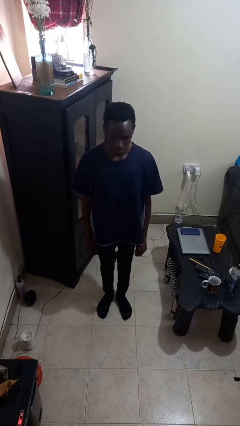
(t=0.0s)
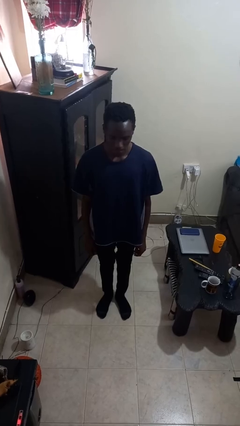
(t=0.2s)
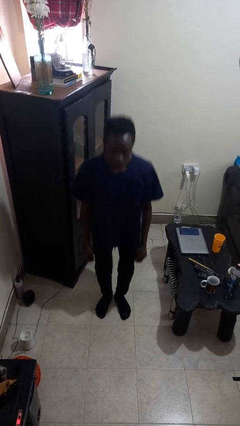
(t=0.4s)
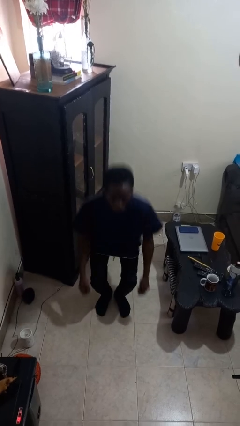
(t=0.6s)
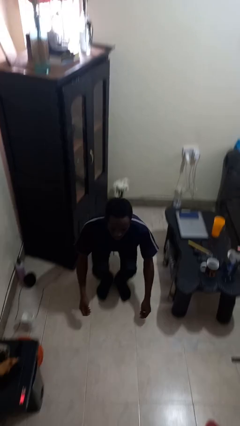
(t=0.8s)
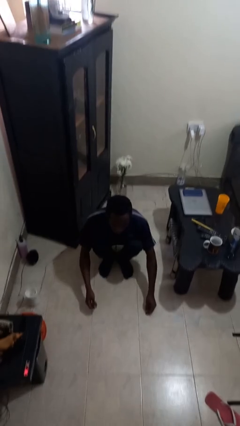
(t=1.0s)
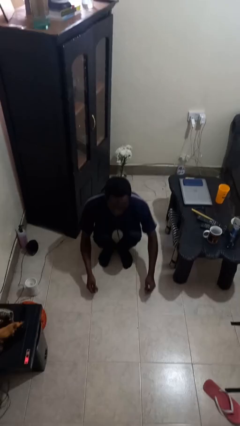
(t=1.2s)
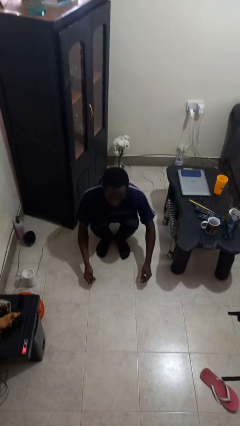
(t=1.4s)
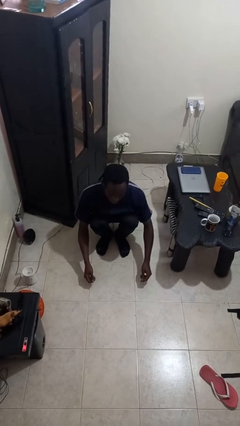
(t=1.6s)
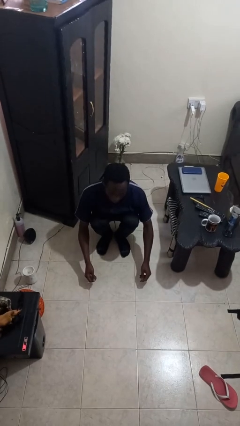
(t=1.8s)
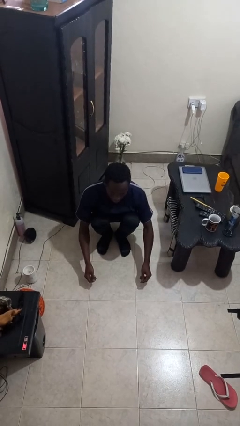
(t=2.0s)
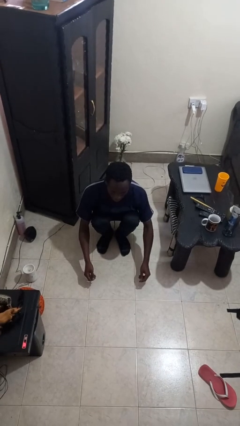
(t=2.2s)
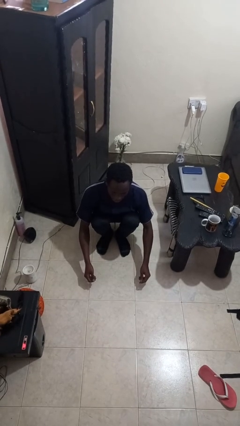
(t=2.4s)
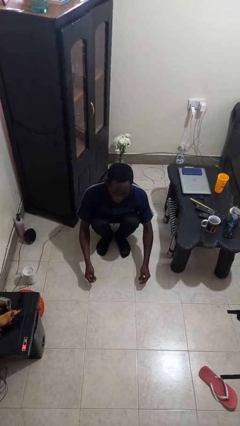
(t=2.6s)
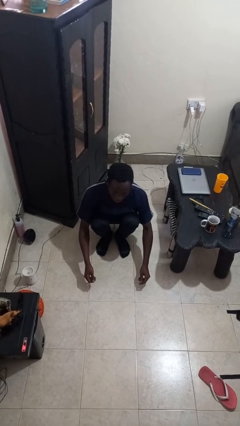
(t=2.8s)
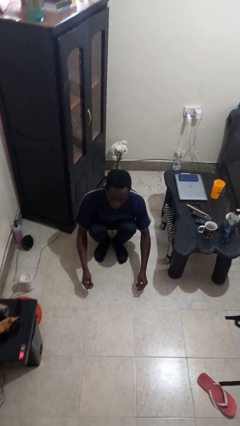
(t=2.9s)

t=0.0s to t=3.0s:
person squats

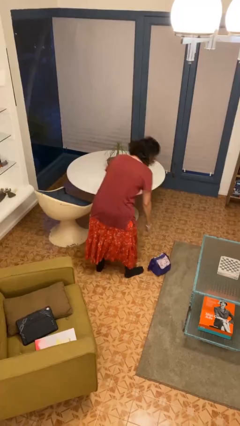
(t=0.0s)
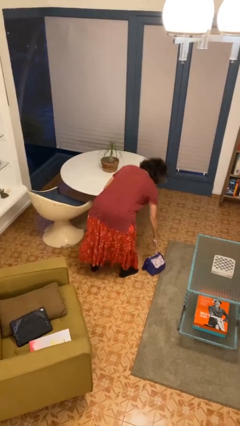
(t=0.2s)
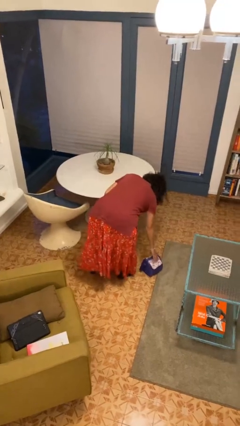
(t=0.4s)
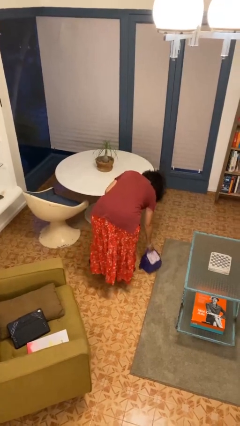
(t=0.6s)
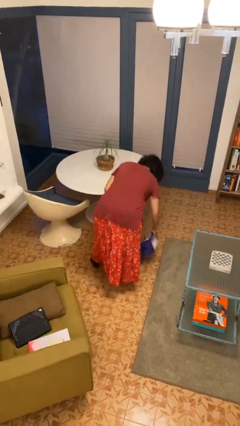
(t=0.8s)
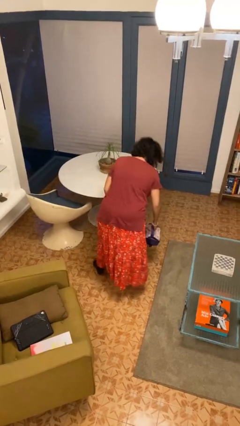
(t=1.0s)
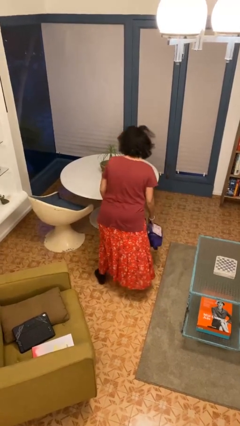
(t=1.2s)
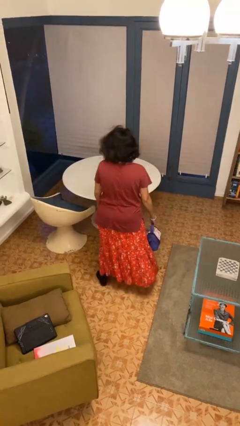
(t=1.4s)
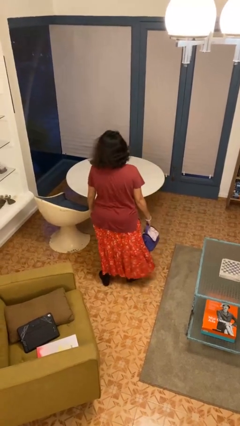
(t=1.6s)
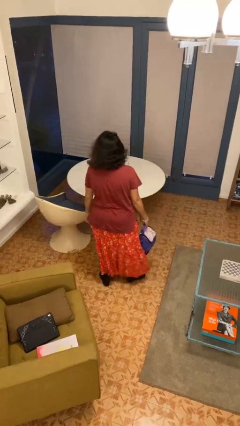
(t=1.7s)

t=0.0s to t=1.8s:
person picks up object from floor

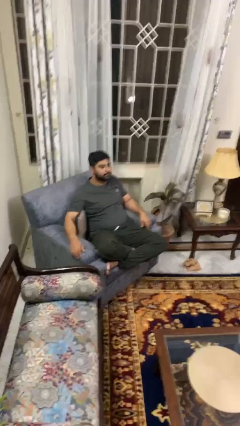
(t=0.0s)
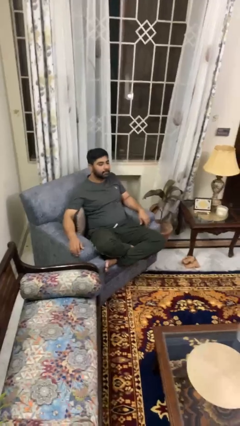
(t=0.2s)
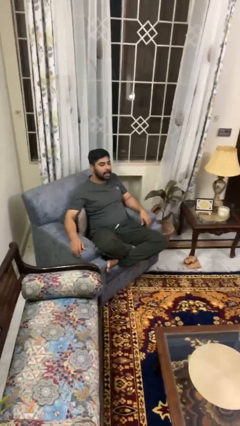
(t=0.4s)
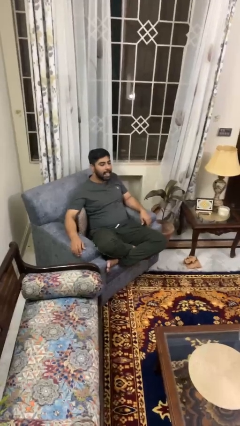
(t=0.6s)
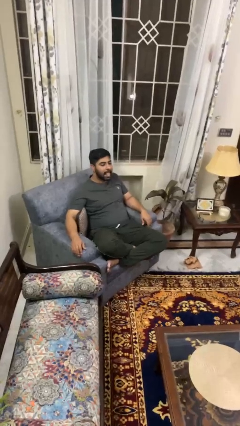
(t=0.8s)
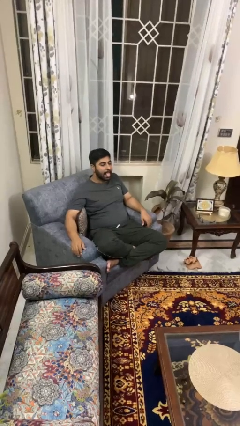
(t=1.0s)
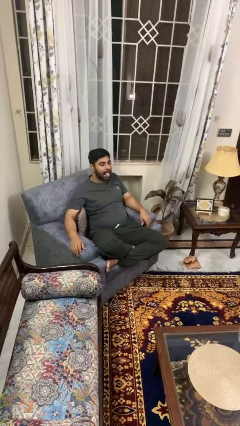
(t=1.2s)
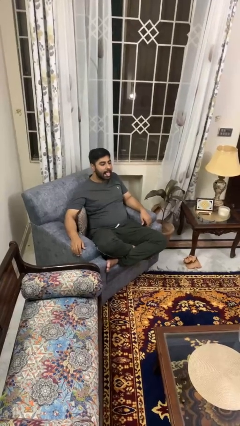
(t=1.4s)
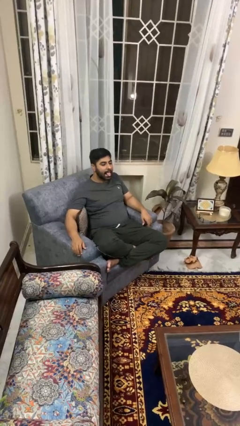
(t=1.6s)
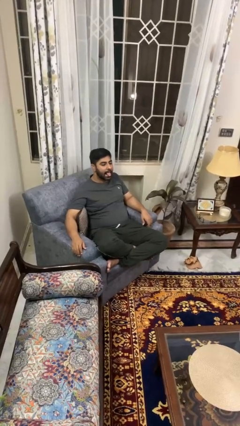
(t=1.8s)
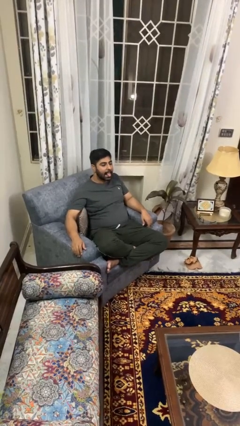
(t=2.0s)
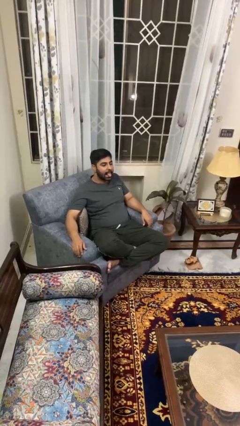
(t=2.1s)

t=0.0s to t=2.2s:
person sticks out tongue

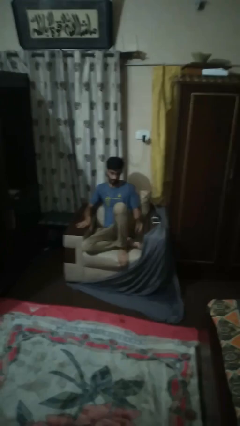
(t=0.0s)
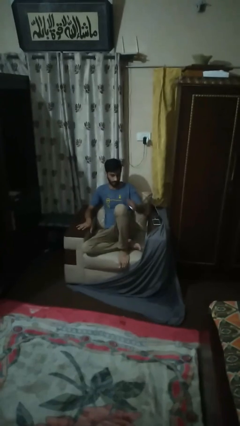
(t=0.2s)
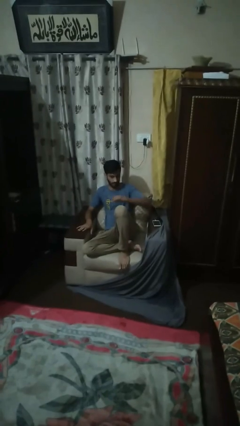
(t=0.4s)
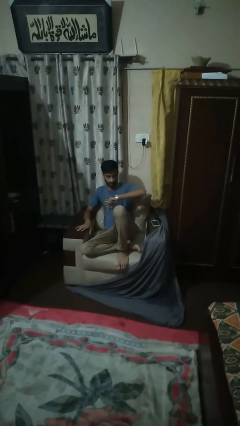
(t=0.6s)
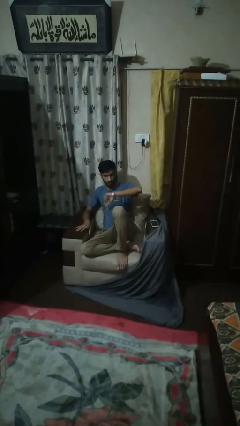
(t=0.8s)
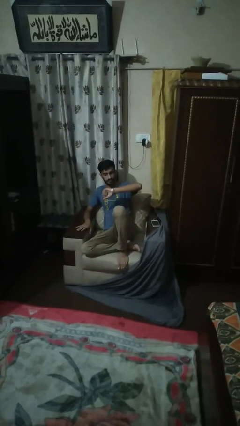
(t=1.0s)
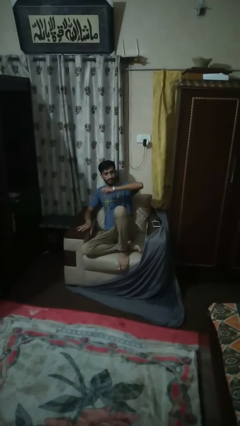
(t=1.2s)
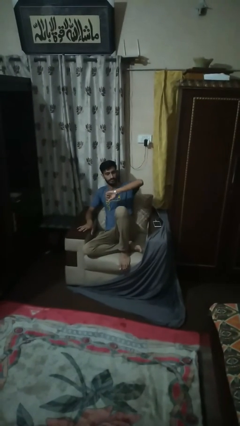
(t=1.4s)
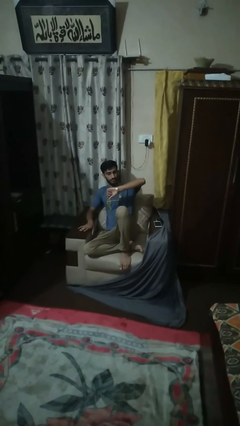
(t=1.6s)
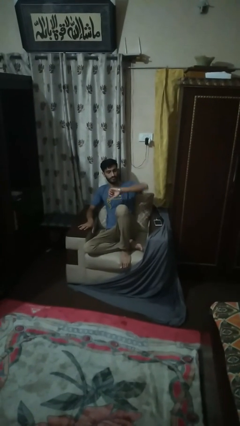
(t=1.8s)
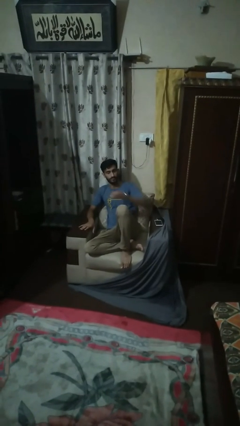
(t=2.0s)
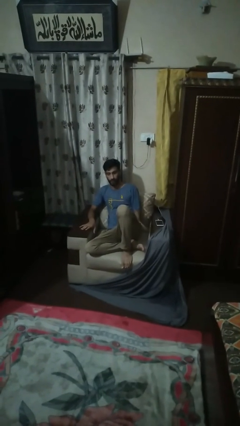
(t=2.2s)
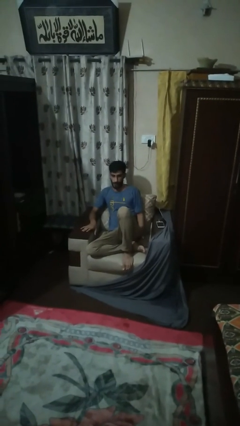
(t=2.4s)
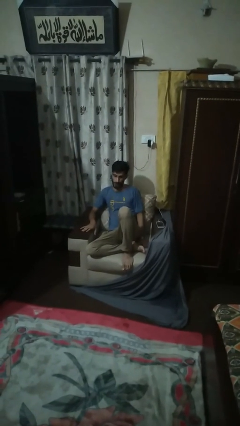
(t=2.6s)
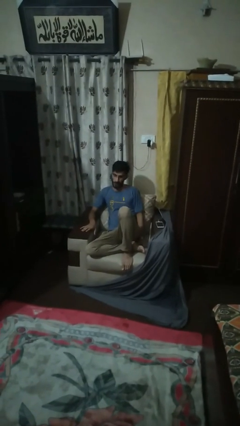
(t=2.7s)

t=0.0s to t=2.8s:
person looks at wristwatch

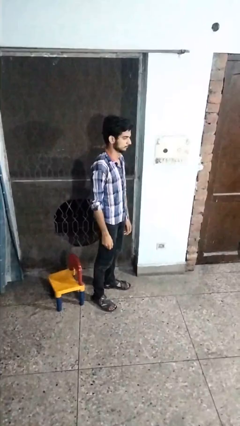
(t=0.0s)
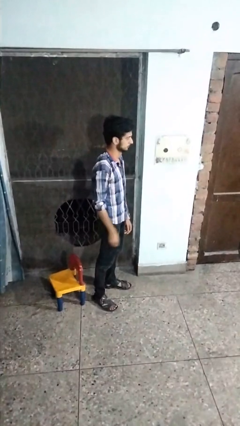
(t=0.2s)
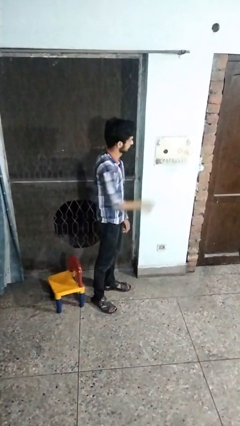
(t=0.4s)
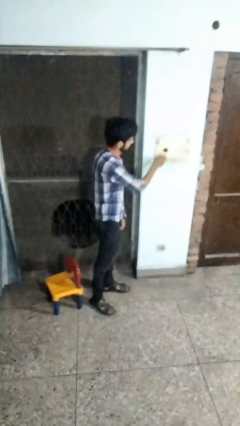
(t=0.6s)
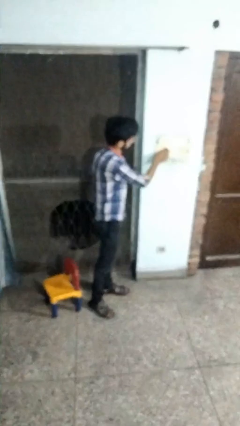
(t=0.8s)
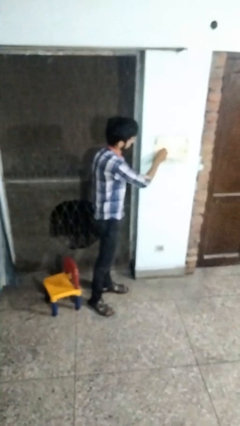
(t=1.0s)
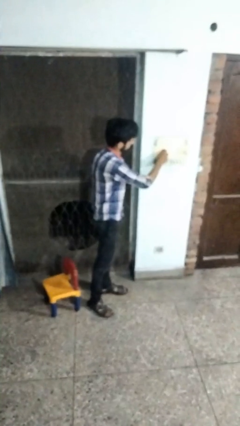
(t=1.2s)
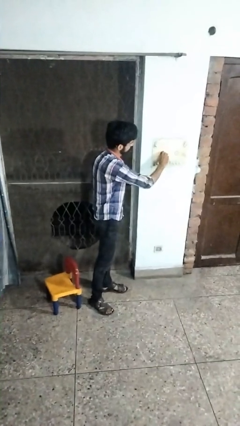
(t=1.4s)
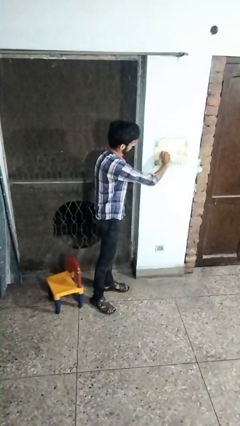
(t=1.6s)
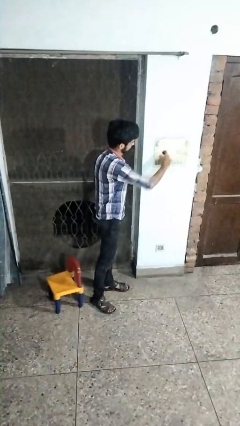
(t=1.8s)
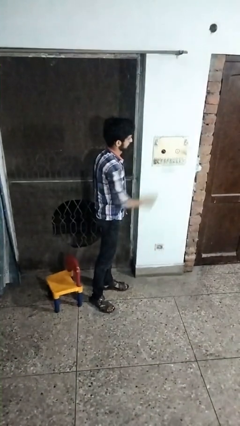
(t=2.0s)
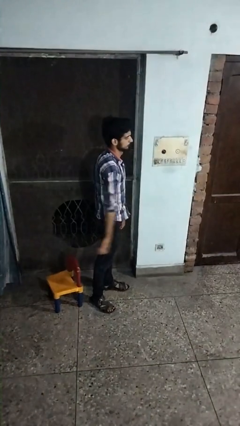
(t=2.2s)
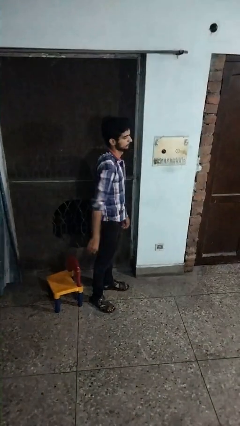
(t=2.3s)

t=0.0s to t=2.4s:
person adjusts thermostat

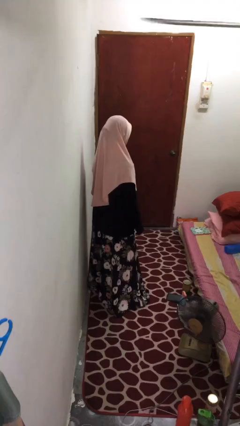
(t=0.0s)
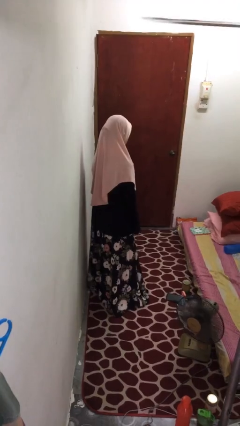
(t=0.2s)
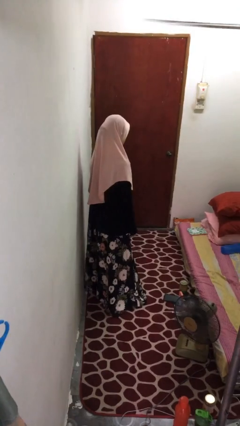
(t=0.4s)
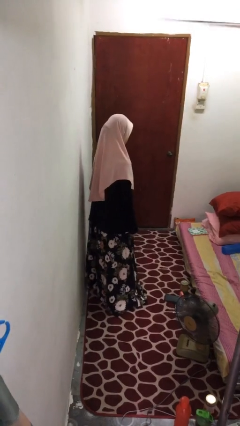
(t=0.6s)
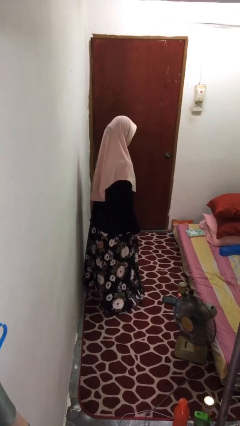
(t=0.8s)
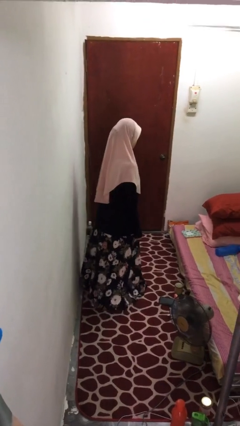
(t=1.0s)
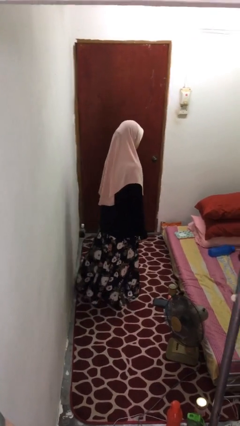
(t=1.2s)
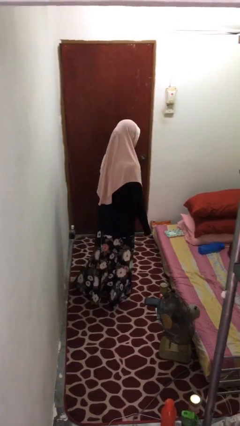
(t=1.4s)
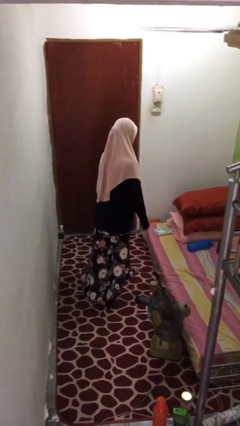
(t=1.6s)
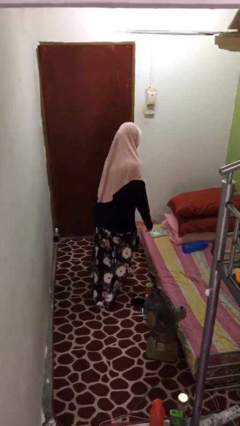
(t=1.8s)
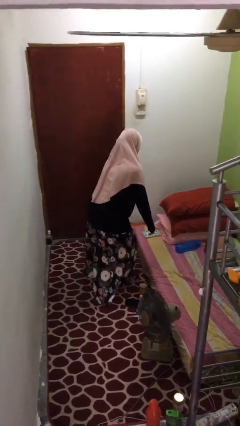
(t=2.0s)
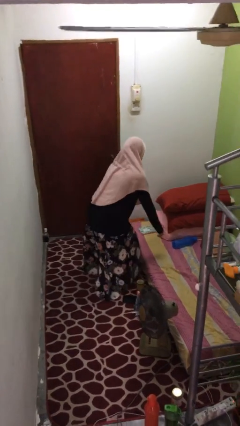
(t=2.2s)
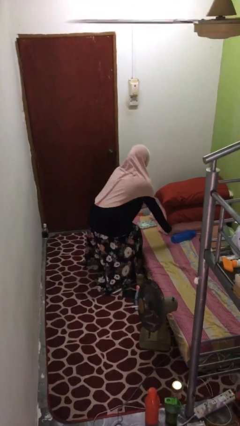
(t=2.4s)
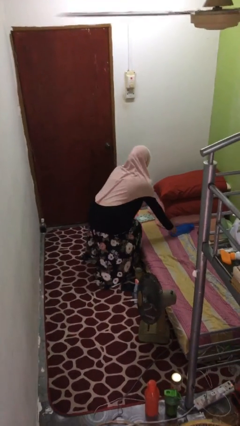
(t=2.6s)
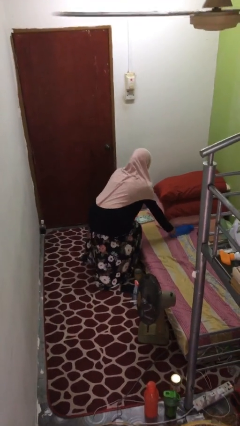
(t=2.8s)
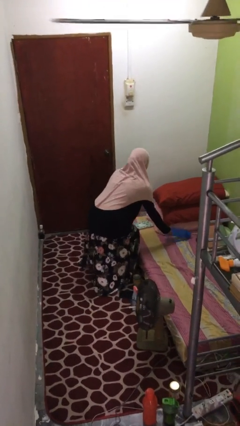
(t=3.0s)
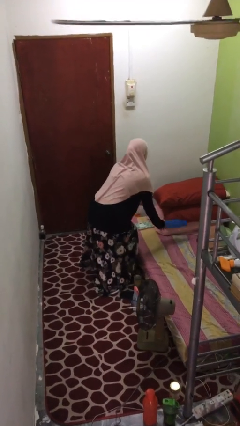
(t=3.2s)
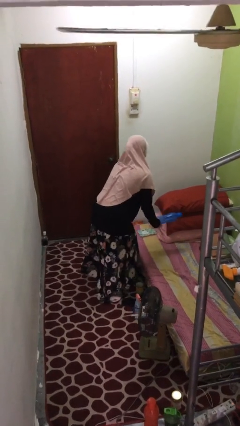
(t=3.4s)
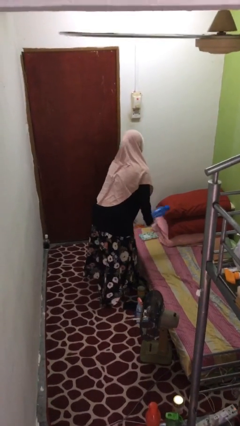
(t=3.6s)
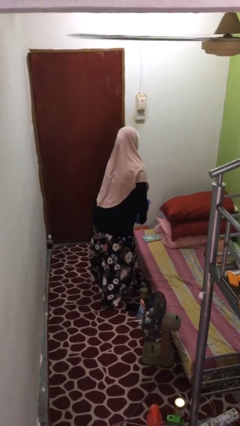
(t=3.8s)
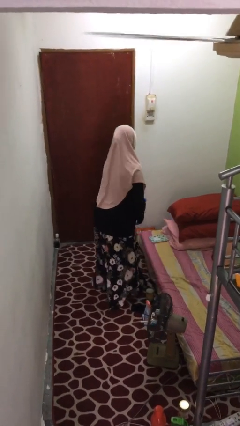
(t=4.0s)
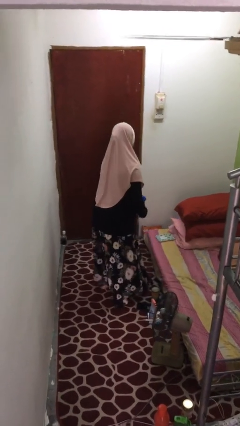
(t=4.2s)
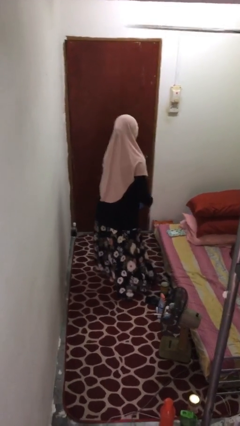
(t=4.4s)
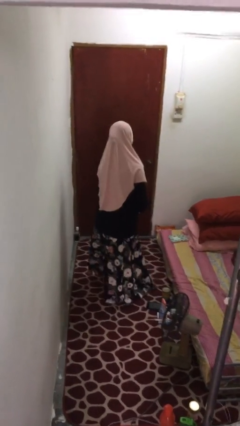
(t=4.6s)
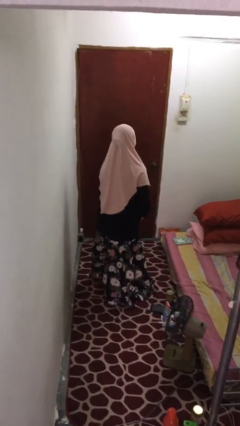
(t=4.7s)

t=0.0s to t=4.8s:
person picks up object from bed

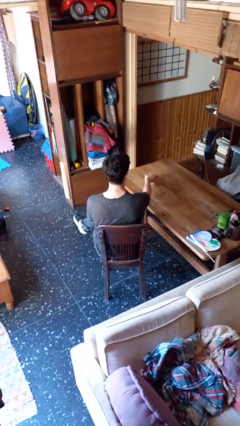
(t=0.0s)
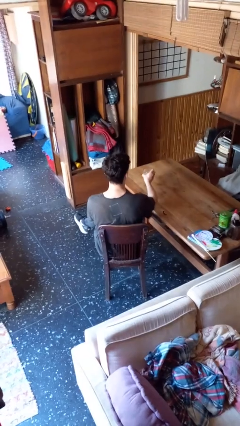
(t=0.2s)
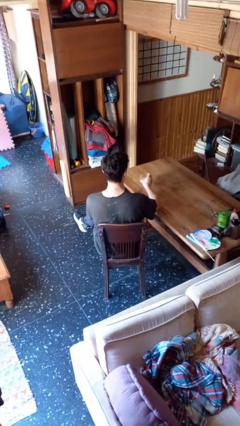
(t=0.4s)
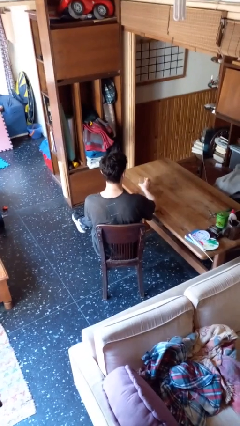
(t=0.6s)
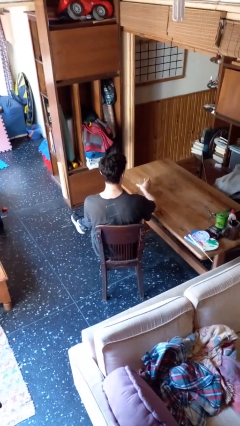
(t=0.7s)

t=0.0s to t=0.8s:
person sets upright glass
